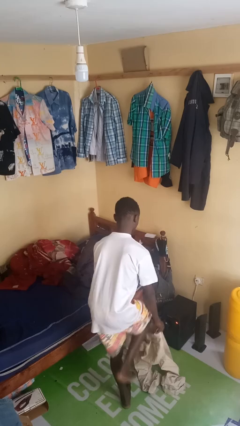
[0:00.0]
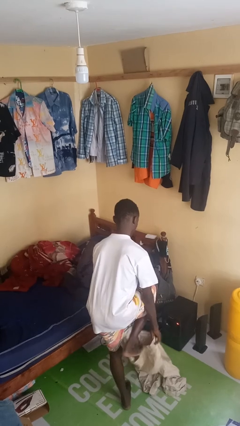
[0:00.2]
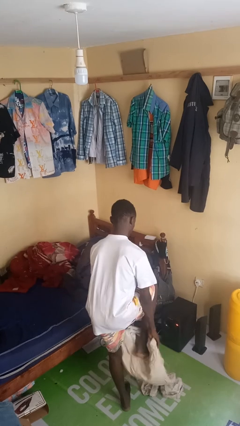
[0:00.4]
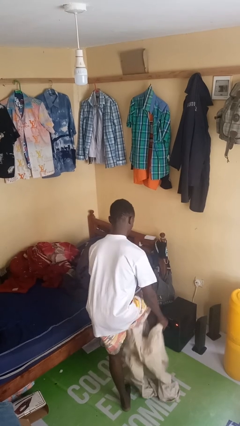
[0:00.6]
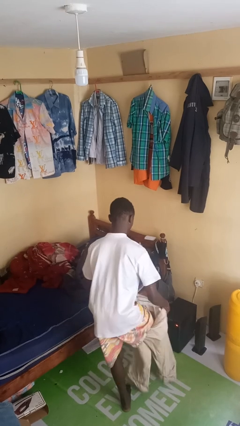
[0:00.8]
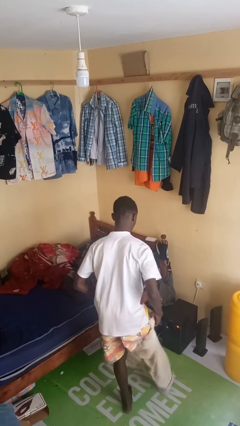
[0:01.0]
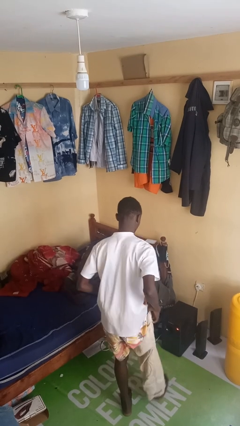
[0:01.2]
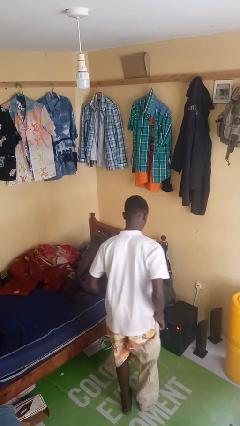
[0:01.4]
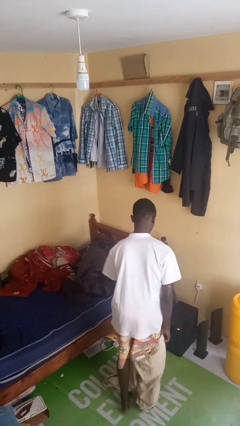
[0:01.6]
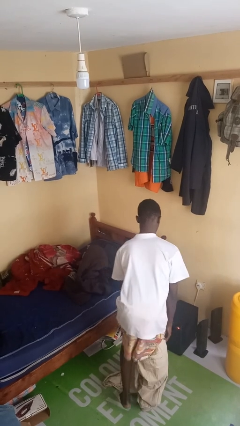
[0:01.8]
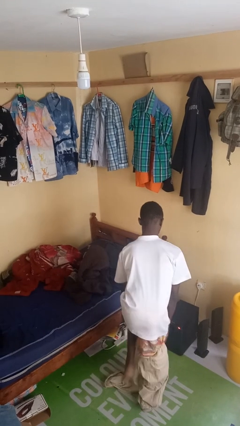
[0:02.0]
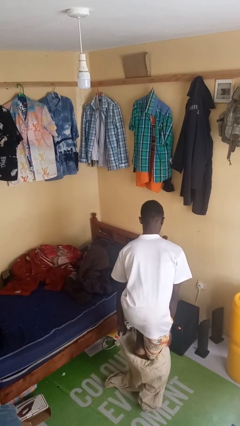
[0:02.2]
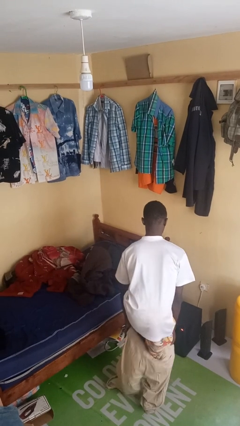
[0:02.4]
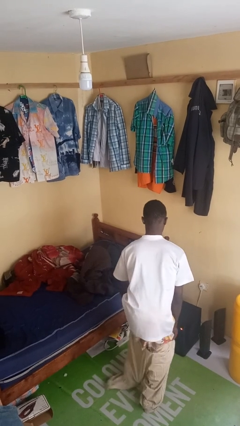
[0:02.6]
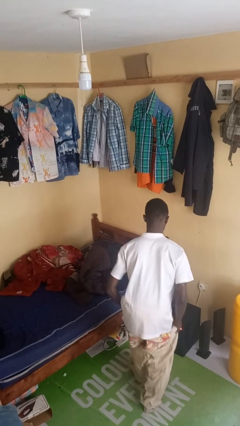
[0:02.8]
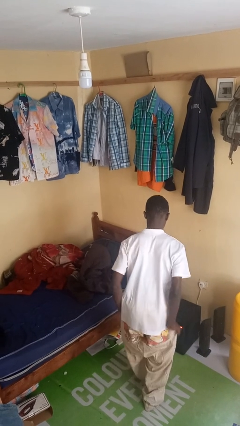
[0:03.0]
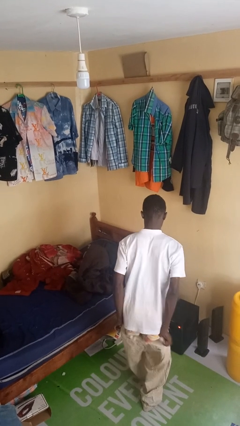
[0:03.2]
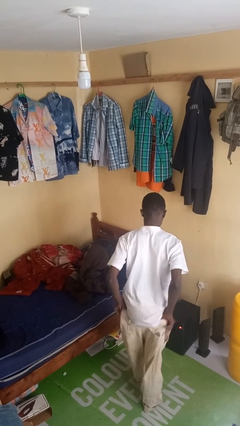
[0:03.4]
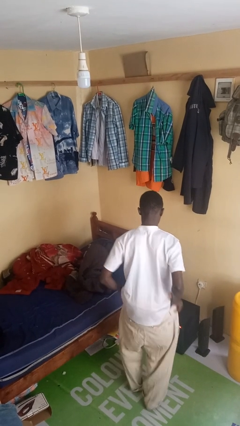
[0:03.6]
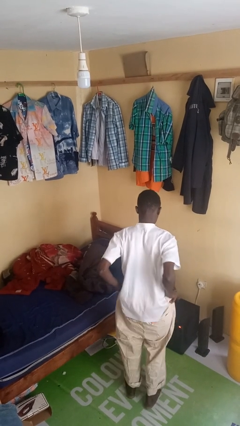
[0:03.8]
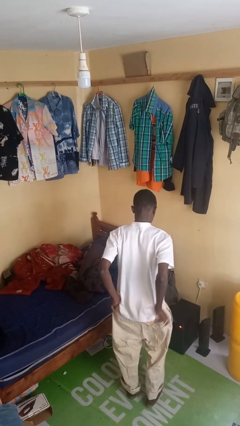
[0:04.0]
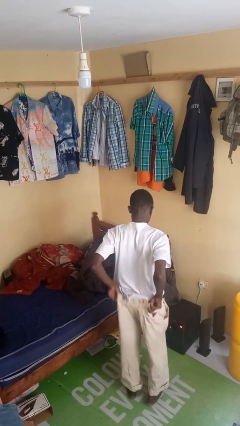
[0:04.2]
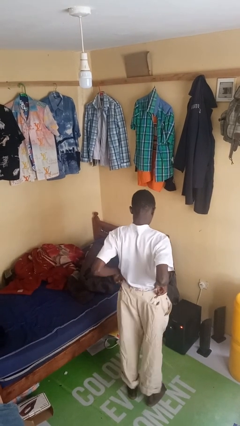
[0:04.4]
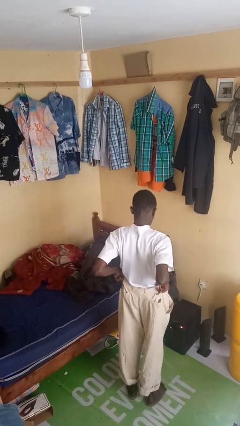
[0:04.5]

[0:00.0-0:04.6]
person puts on pants

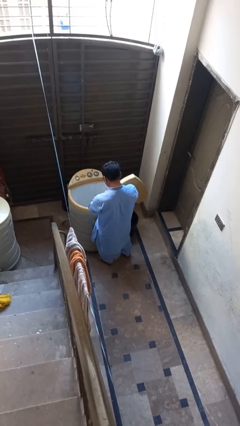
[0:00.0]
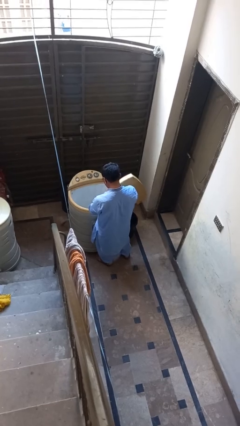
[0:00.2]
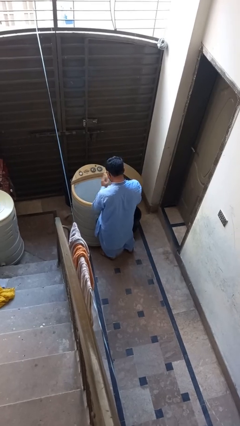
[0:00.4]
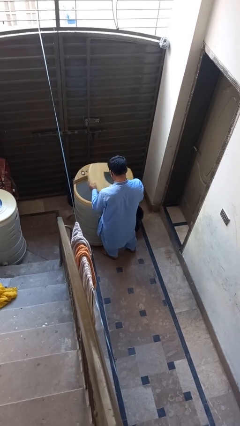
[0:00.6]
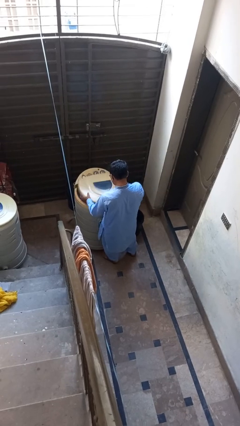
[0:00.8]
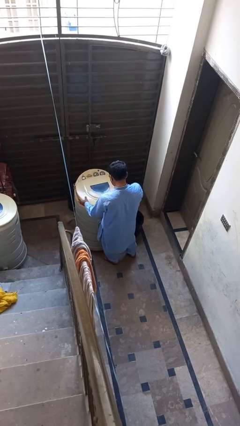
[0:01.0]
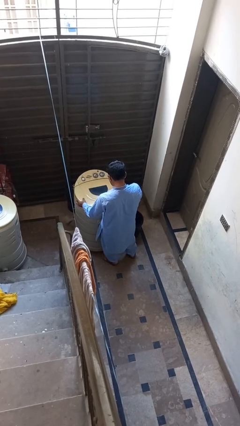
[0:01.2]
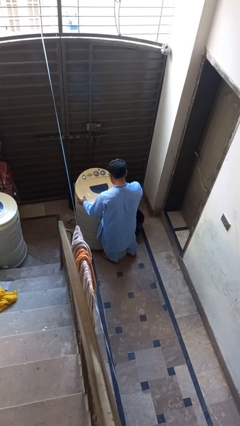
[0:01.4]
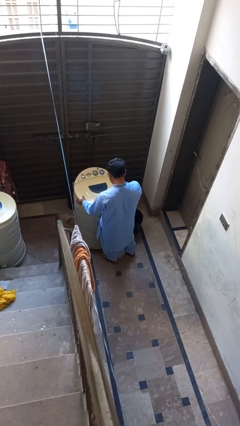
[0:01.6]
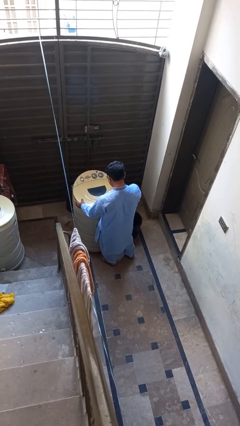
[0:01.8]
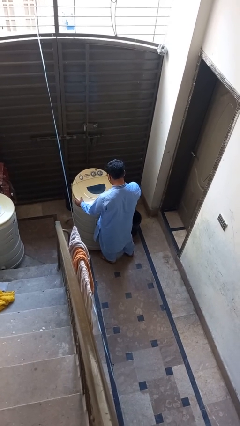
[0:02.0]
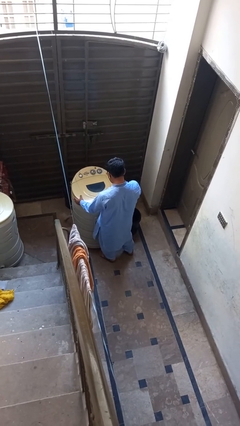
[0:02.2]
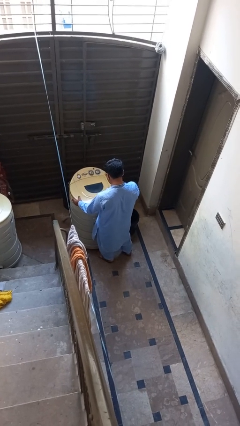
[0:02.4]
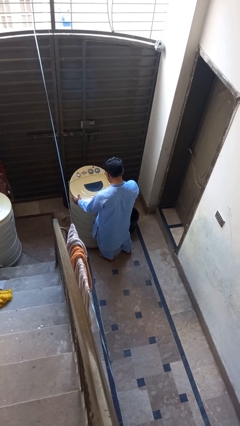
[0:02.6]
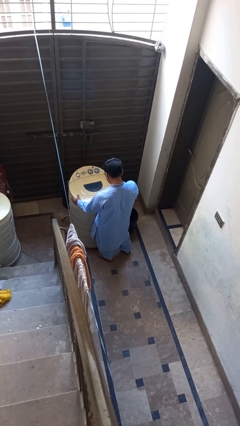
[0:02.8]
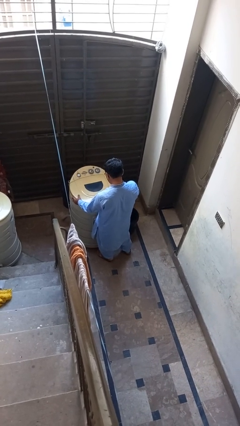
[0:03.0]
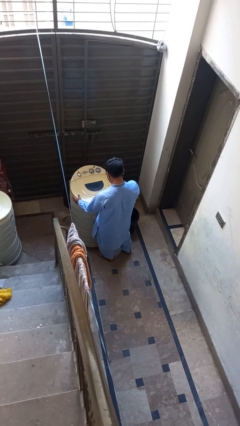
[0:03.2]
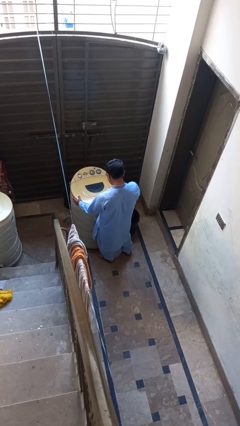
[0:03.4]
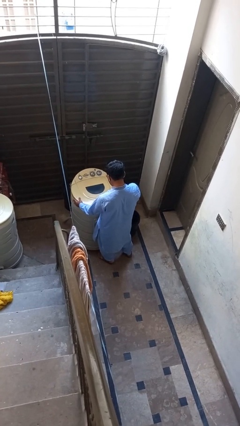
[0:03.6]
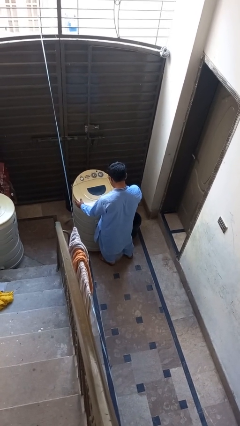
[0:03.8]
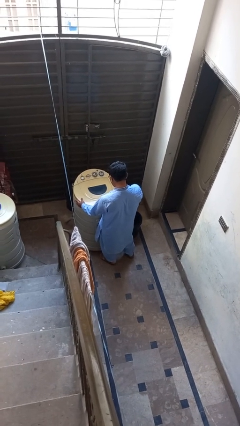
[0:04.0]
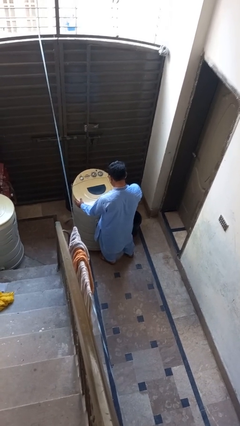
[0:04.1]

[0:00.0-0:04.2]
person closes clothes washer

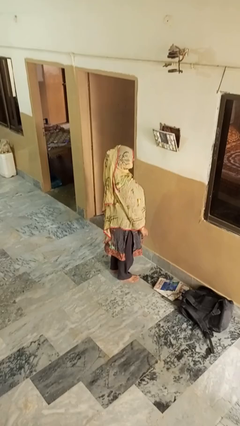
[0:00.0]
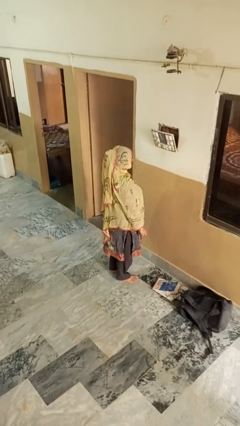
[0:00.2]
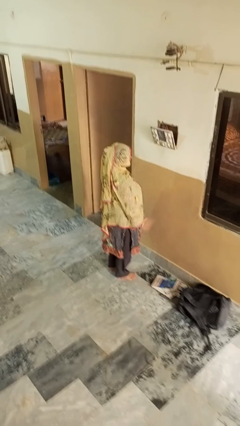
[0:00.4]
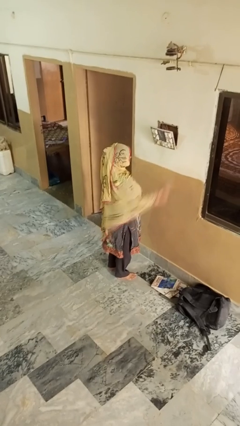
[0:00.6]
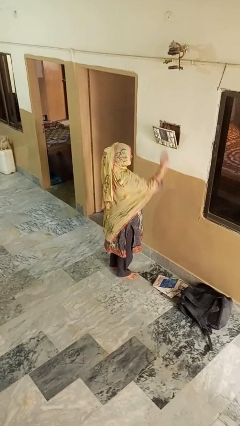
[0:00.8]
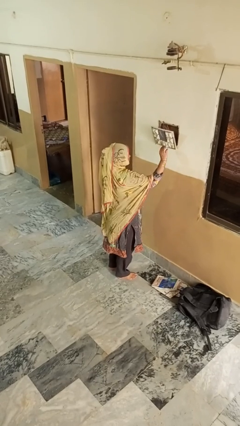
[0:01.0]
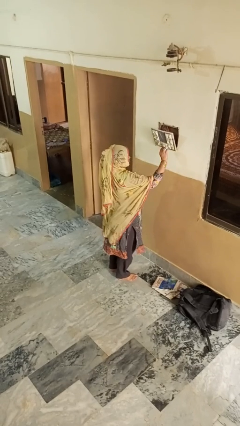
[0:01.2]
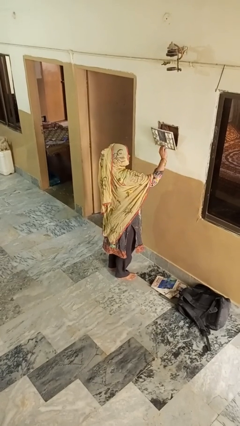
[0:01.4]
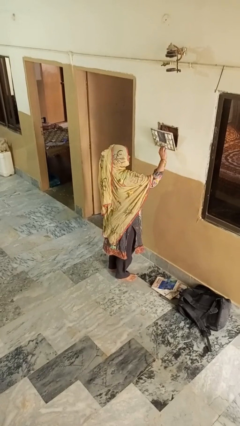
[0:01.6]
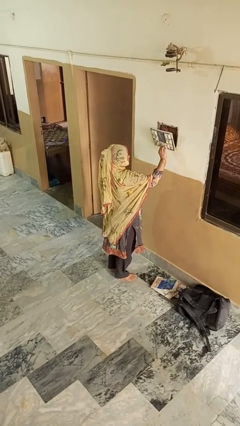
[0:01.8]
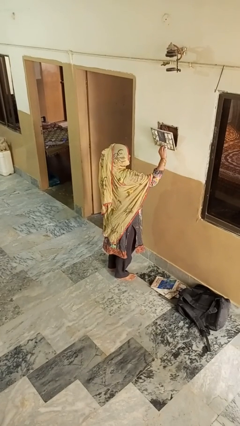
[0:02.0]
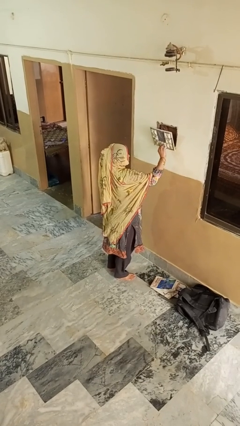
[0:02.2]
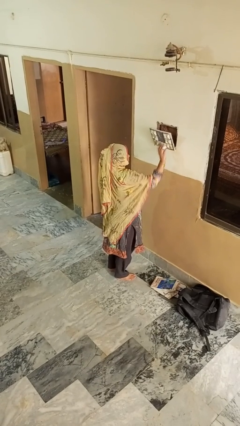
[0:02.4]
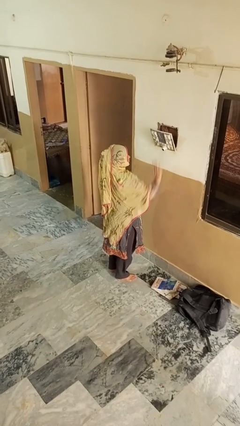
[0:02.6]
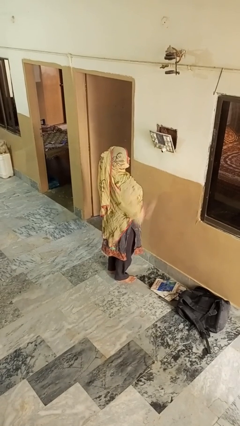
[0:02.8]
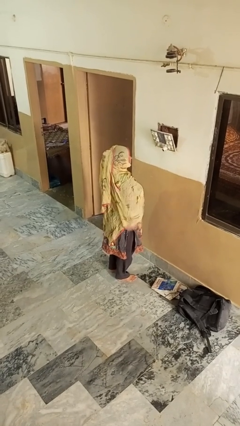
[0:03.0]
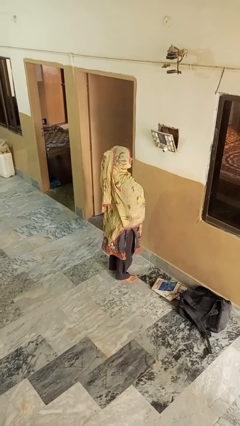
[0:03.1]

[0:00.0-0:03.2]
person plugs into electrical socket

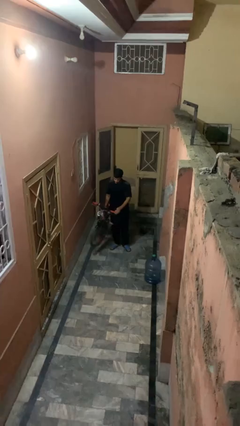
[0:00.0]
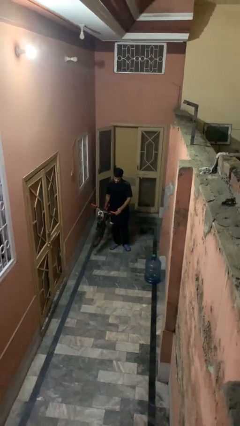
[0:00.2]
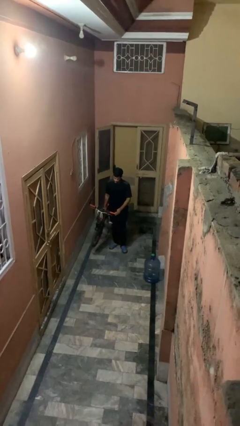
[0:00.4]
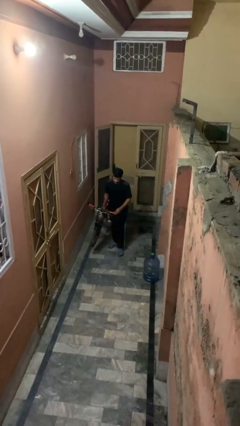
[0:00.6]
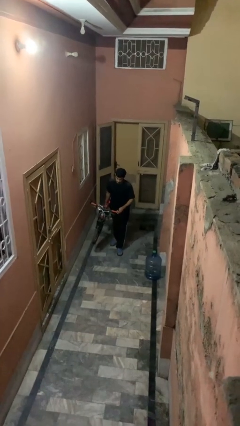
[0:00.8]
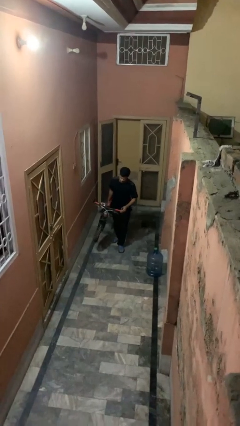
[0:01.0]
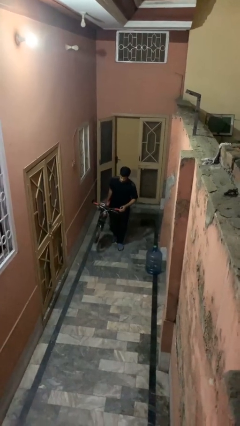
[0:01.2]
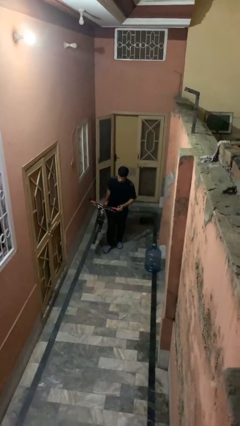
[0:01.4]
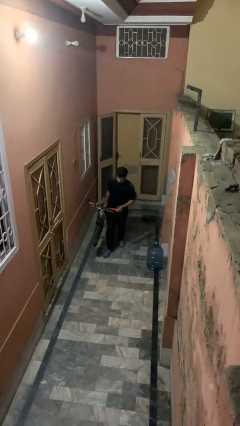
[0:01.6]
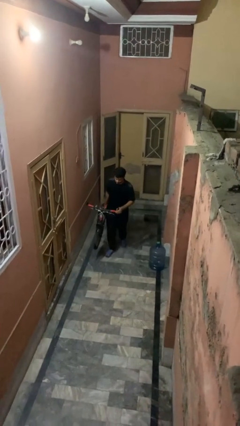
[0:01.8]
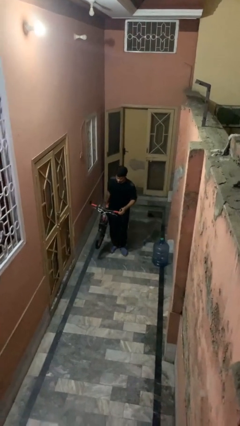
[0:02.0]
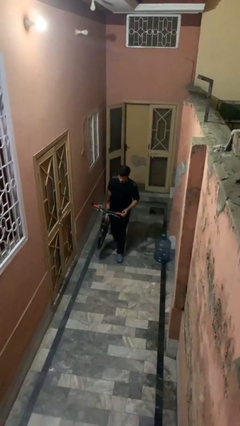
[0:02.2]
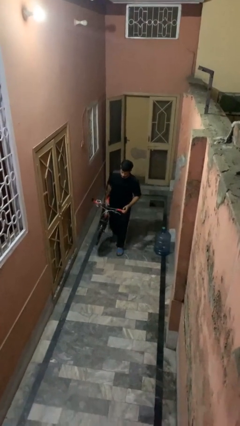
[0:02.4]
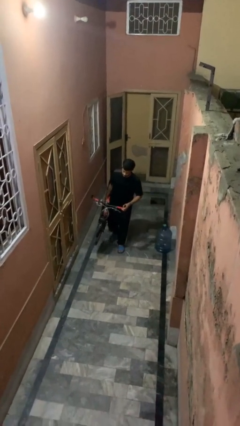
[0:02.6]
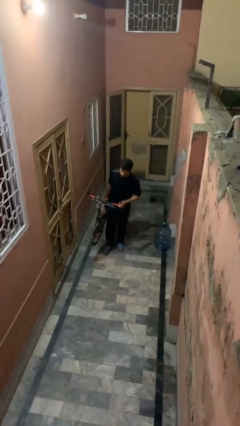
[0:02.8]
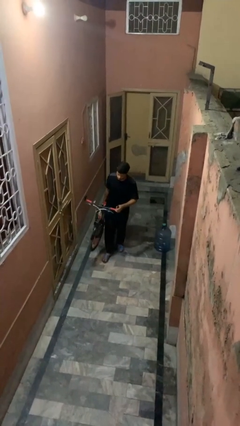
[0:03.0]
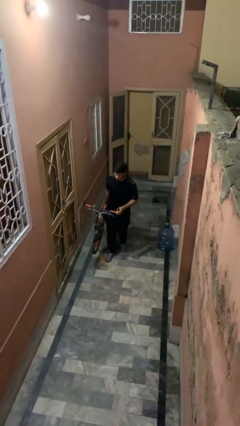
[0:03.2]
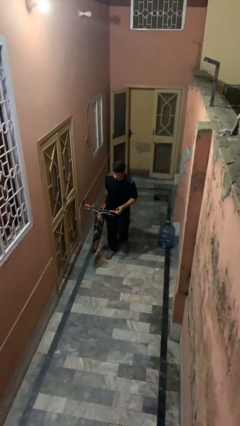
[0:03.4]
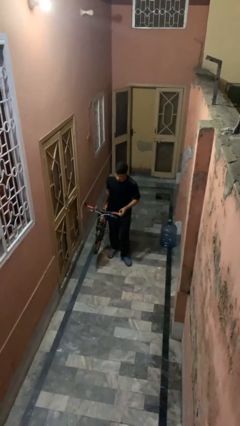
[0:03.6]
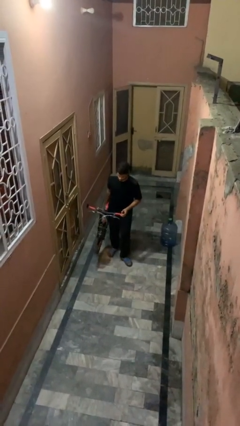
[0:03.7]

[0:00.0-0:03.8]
person carries bicycle

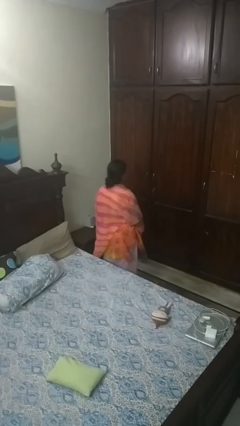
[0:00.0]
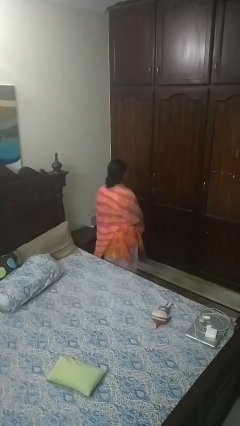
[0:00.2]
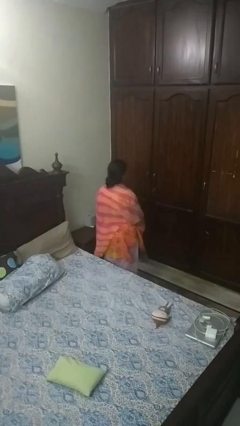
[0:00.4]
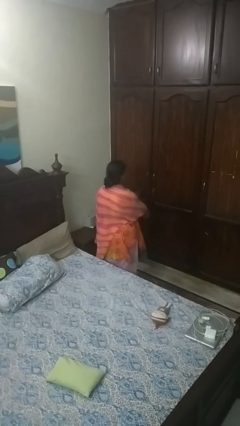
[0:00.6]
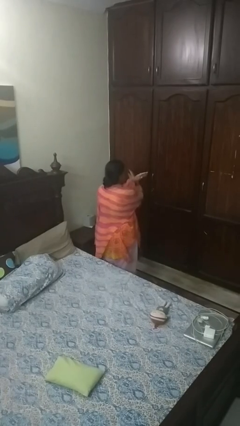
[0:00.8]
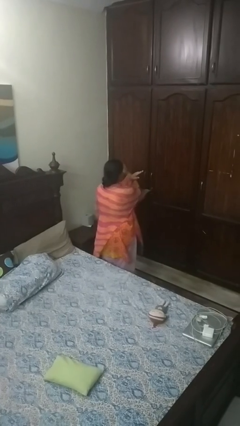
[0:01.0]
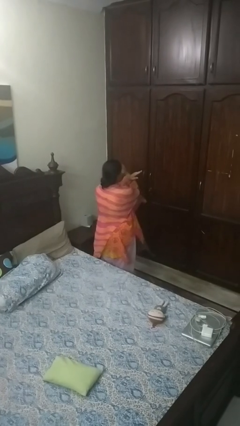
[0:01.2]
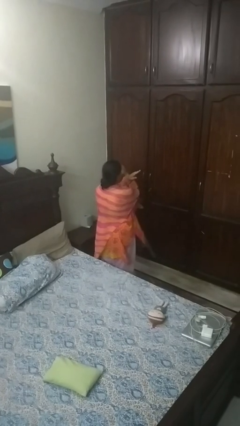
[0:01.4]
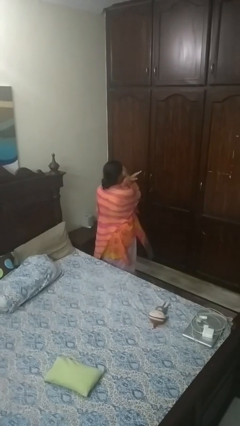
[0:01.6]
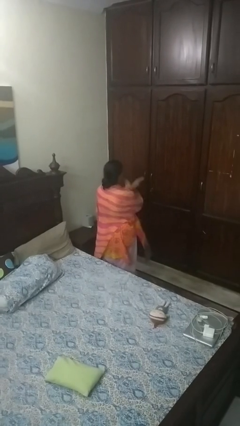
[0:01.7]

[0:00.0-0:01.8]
person gestures arms x
